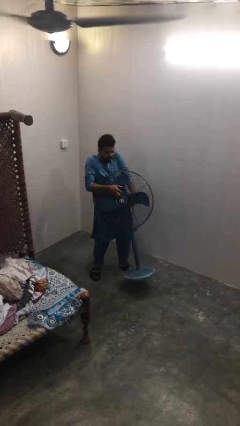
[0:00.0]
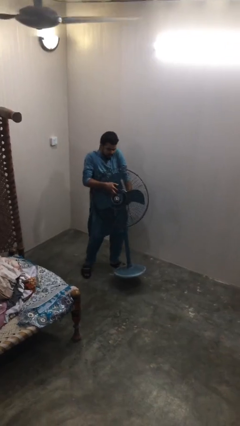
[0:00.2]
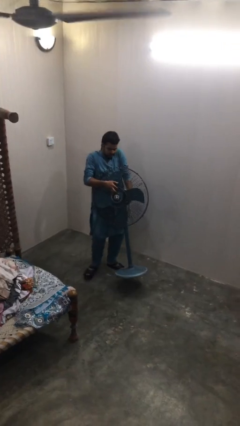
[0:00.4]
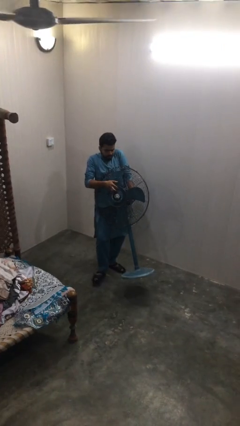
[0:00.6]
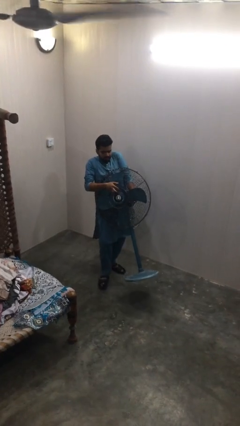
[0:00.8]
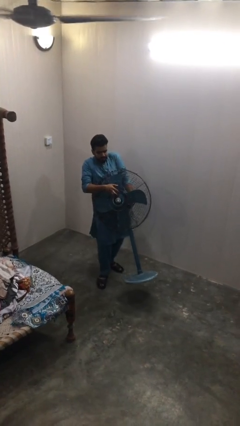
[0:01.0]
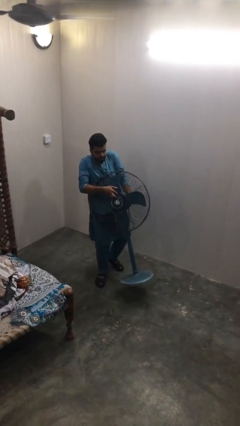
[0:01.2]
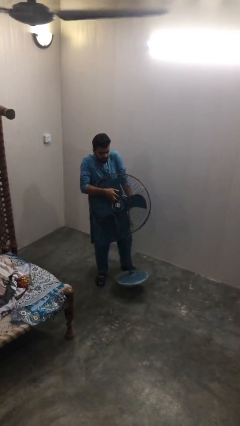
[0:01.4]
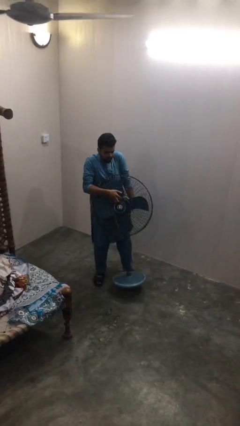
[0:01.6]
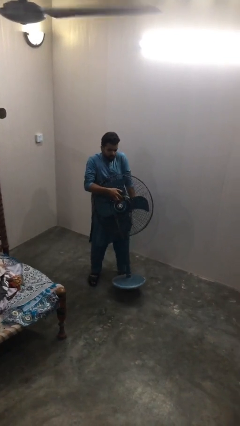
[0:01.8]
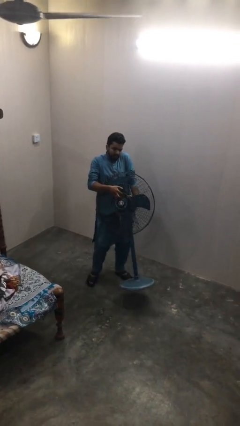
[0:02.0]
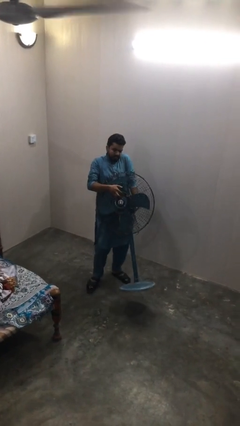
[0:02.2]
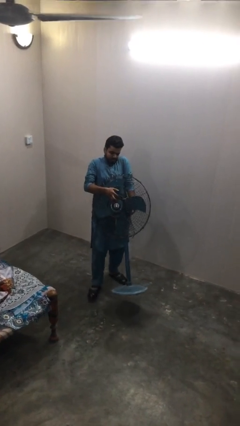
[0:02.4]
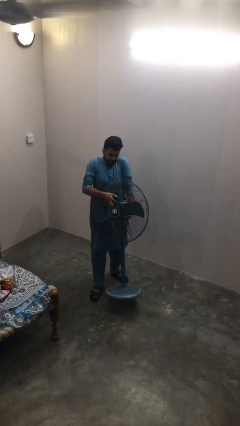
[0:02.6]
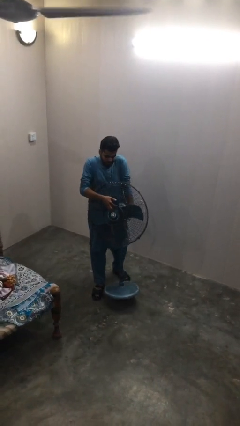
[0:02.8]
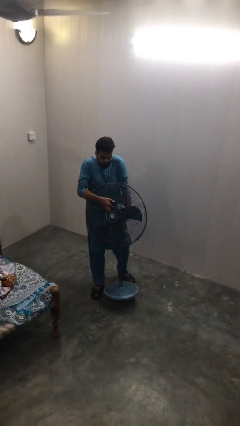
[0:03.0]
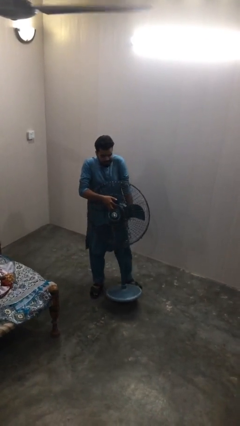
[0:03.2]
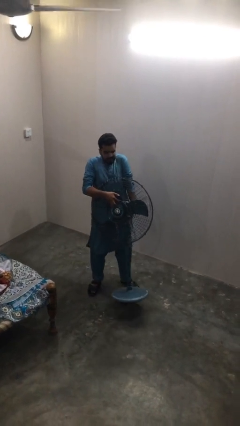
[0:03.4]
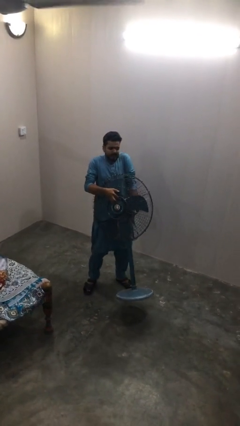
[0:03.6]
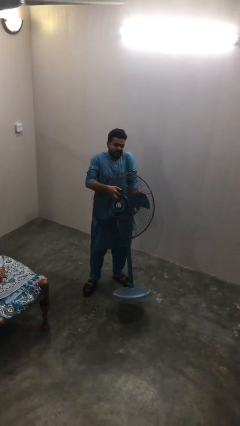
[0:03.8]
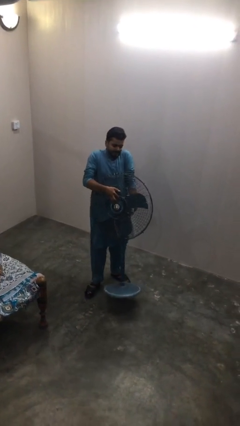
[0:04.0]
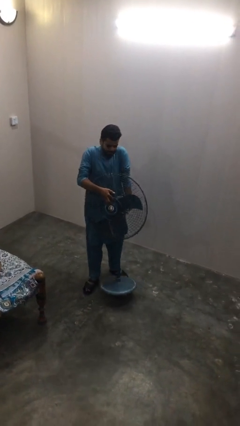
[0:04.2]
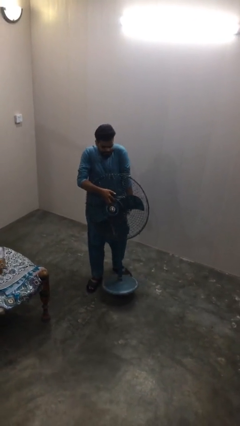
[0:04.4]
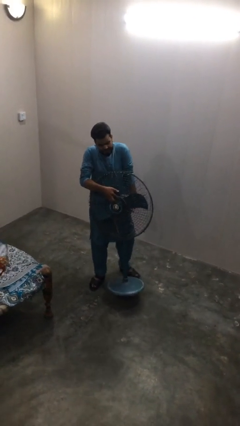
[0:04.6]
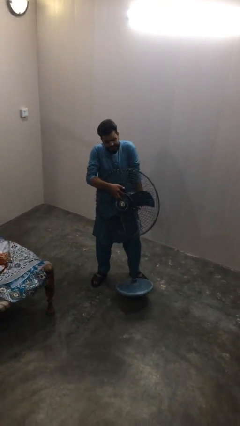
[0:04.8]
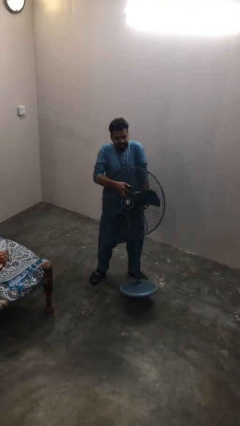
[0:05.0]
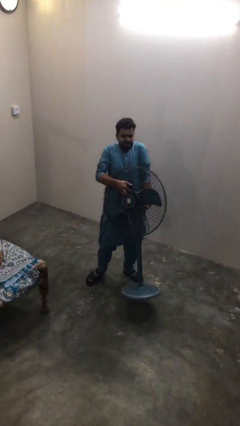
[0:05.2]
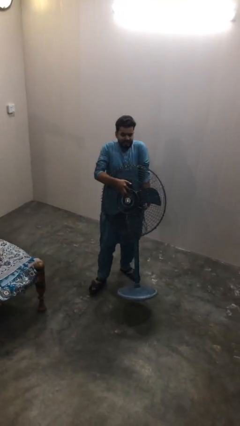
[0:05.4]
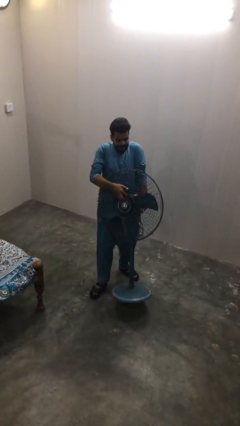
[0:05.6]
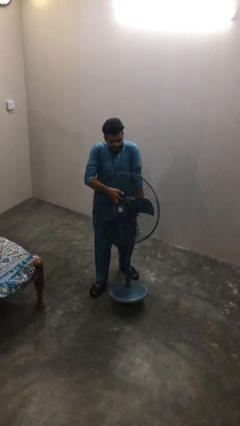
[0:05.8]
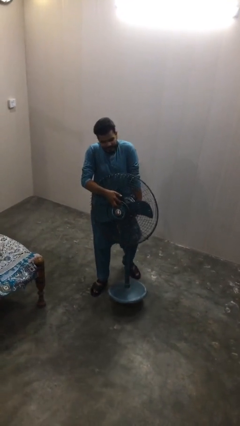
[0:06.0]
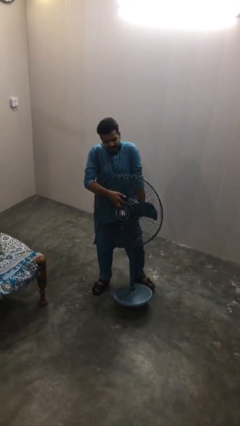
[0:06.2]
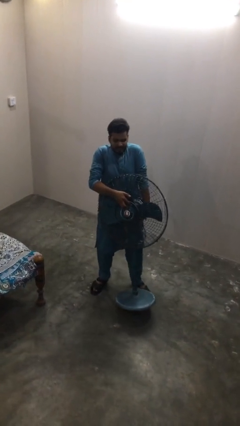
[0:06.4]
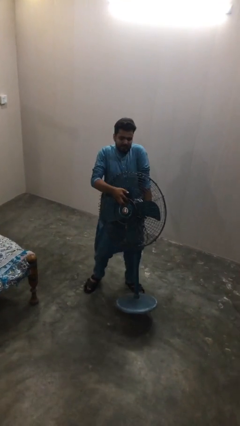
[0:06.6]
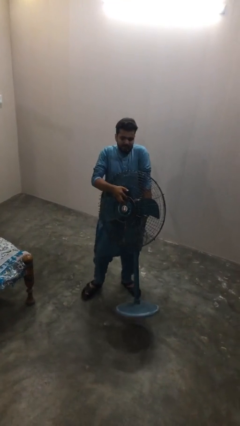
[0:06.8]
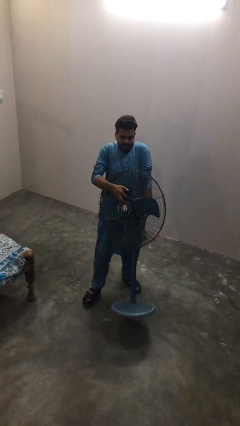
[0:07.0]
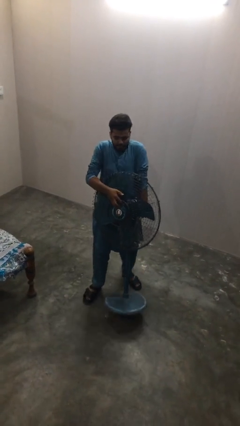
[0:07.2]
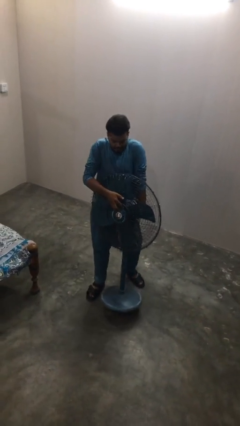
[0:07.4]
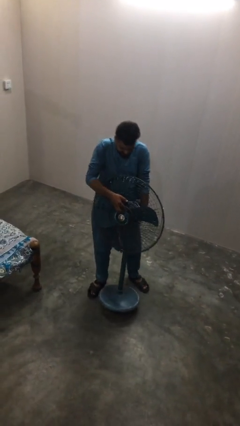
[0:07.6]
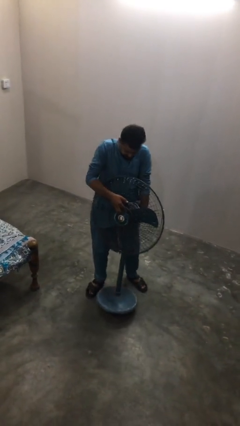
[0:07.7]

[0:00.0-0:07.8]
person carries heavy object

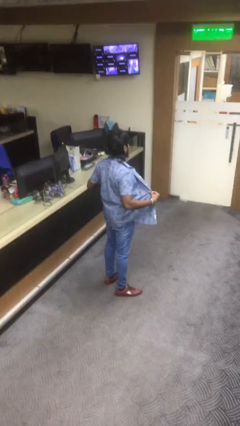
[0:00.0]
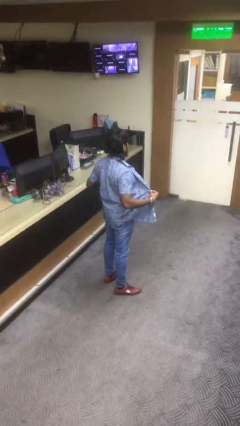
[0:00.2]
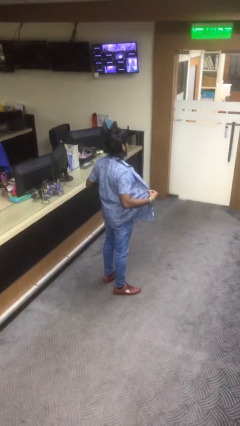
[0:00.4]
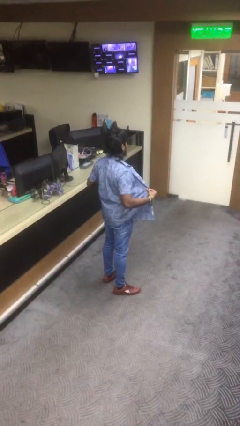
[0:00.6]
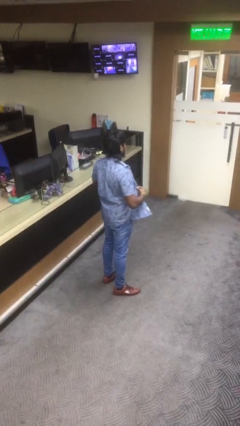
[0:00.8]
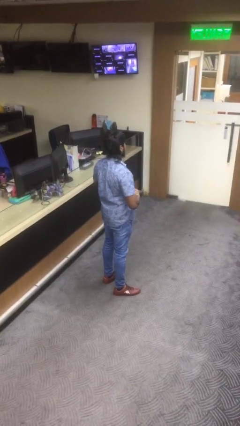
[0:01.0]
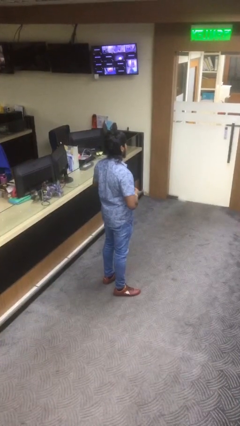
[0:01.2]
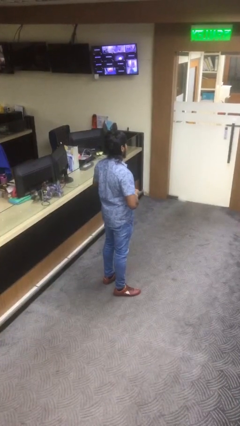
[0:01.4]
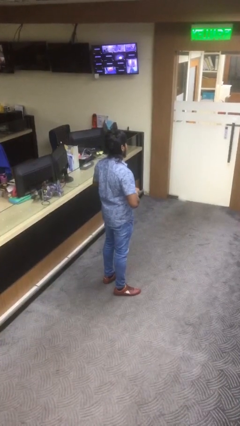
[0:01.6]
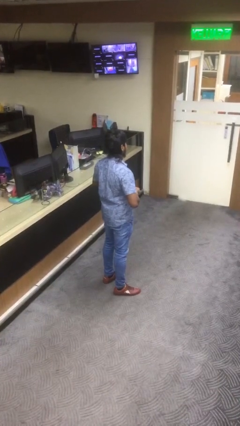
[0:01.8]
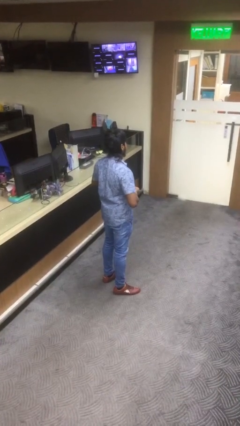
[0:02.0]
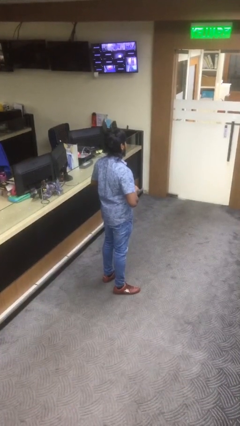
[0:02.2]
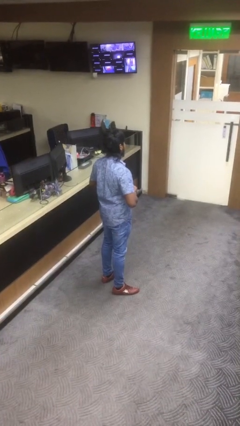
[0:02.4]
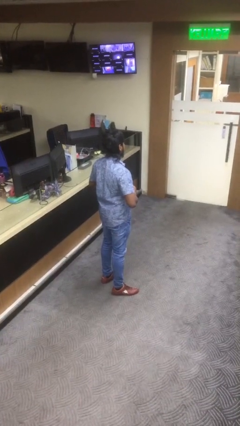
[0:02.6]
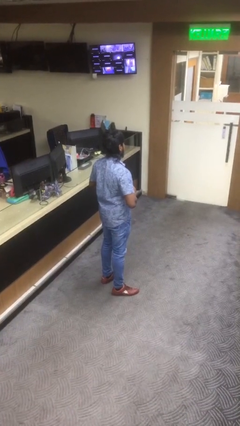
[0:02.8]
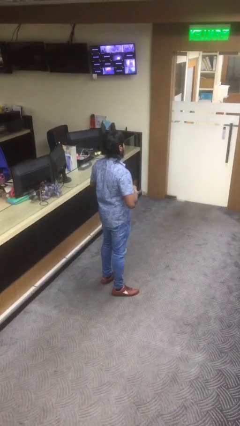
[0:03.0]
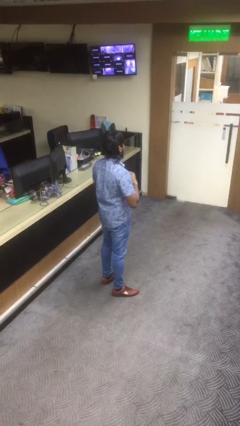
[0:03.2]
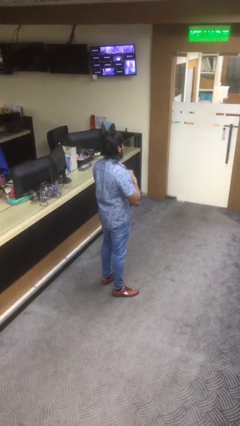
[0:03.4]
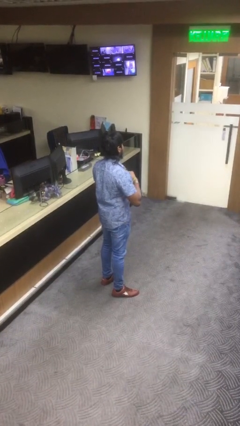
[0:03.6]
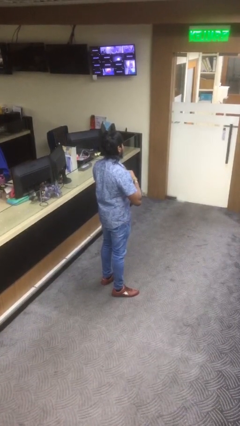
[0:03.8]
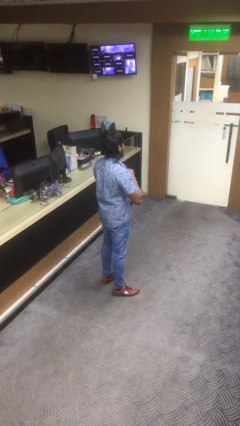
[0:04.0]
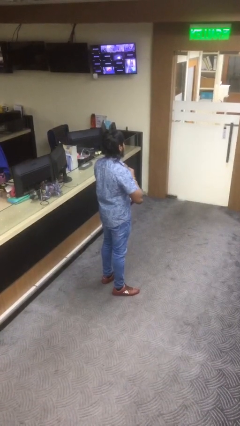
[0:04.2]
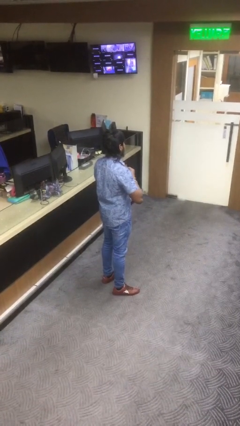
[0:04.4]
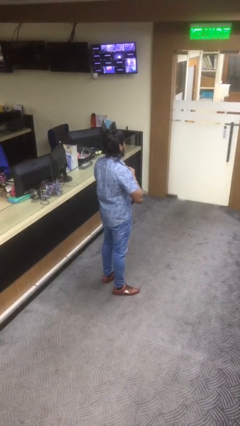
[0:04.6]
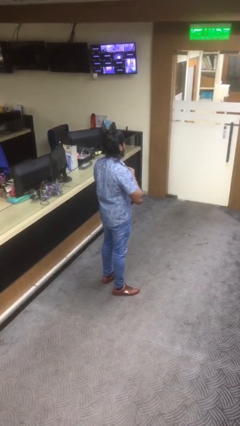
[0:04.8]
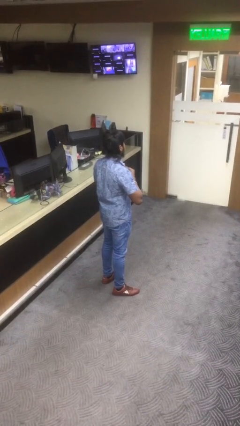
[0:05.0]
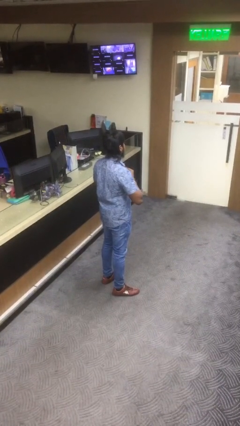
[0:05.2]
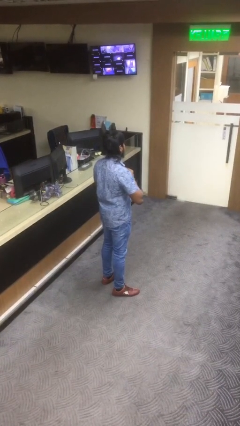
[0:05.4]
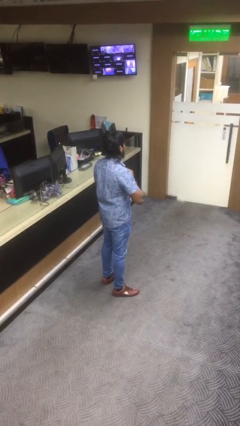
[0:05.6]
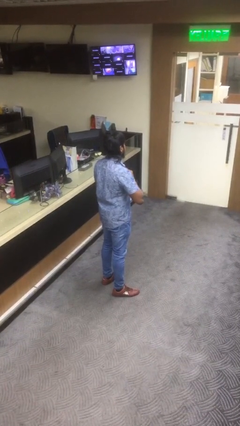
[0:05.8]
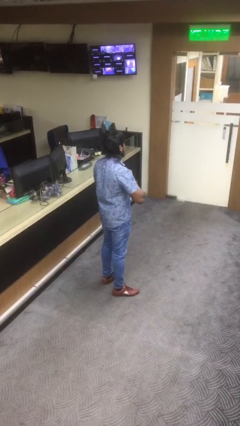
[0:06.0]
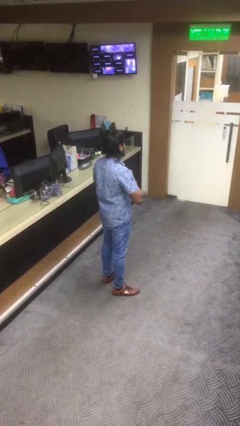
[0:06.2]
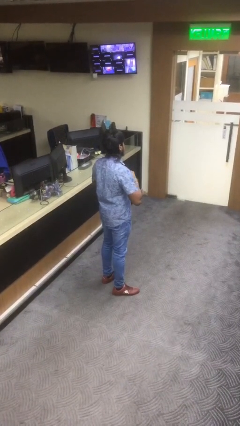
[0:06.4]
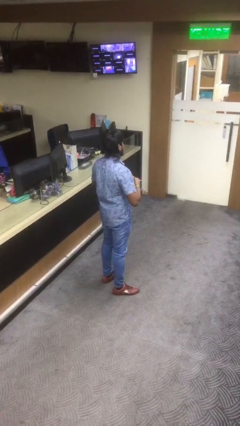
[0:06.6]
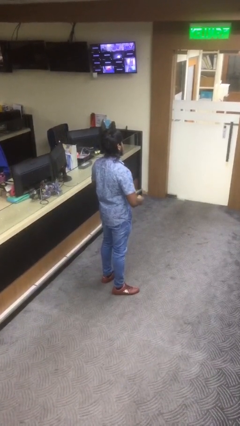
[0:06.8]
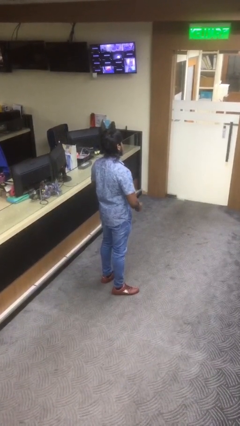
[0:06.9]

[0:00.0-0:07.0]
person buttons shirt

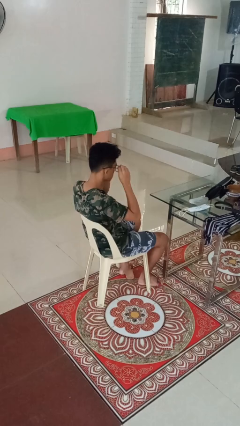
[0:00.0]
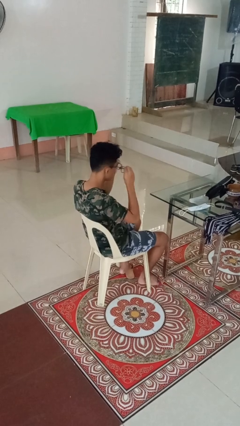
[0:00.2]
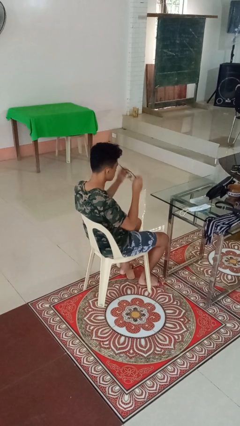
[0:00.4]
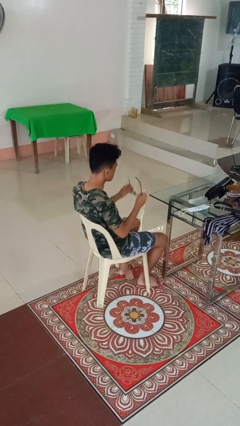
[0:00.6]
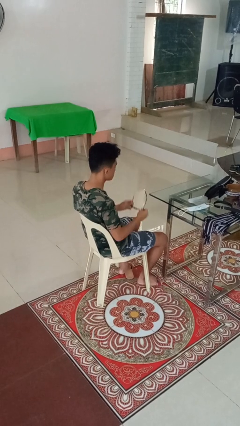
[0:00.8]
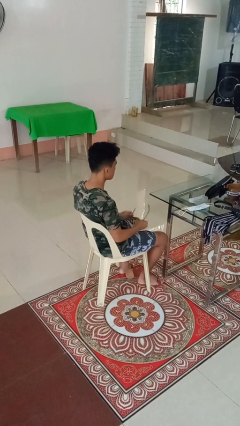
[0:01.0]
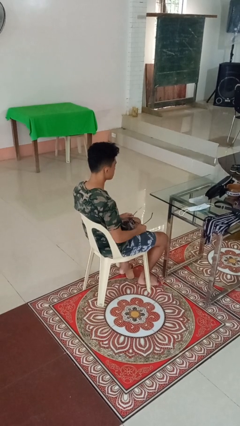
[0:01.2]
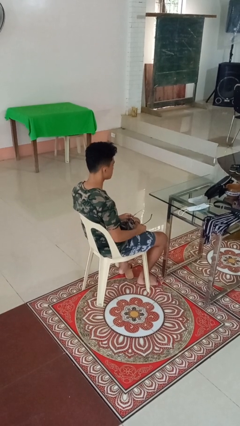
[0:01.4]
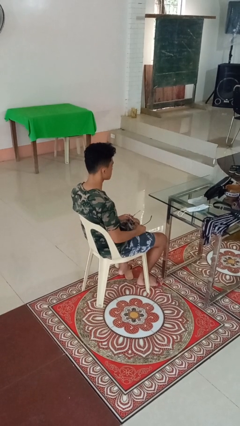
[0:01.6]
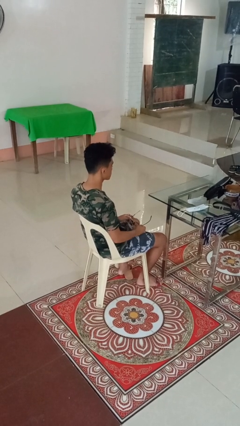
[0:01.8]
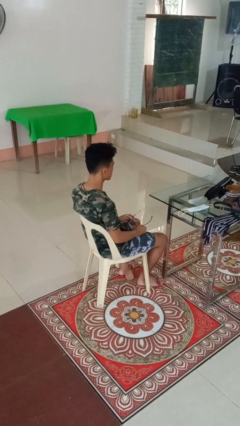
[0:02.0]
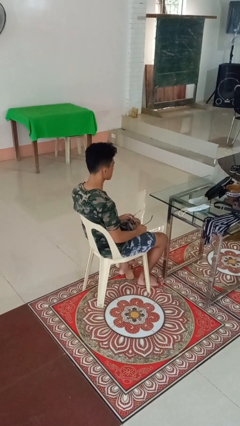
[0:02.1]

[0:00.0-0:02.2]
person takes off glasses

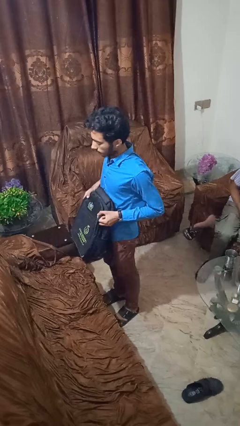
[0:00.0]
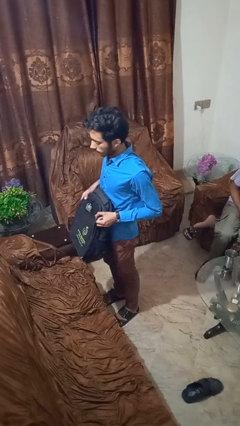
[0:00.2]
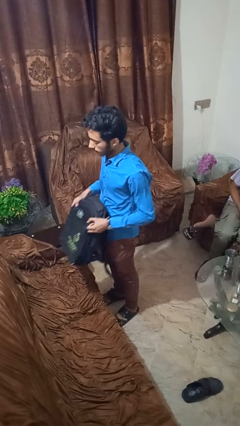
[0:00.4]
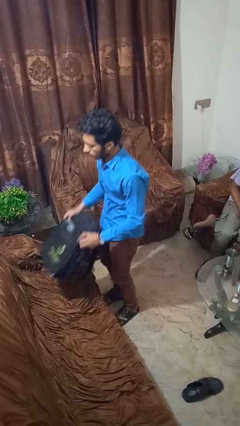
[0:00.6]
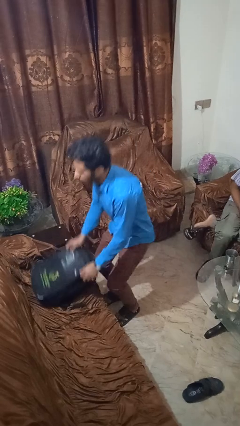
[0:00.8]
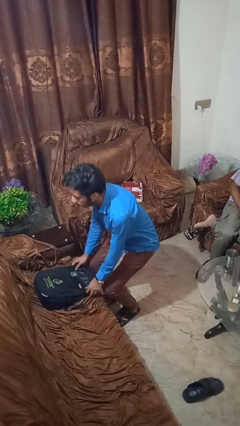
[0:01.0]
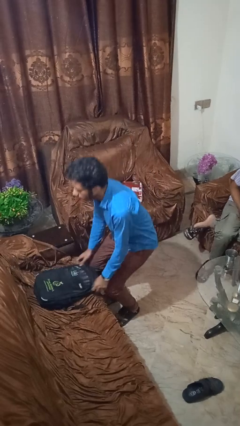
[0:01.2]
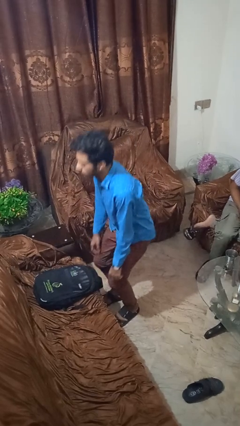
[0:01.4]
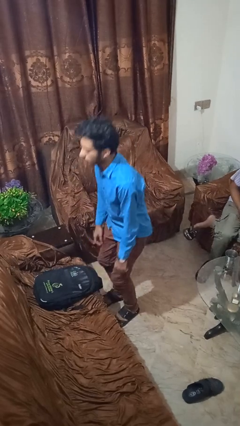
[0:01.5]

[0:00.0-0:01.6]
person puts down object on couch
